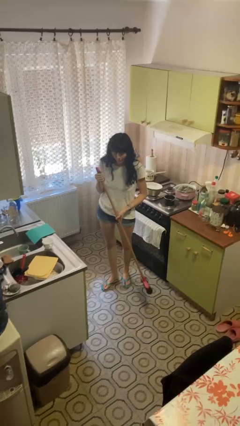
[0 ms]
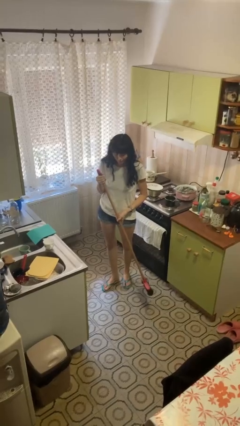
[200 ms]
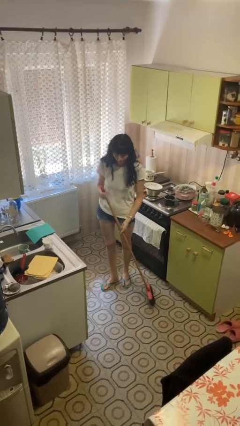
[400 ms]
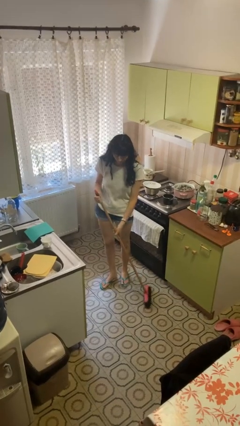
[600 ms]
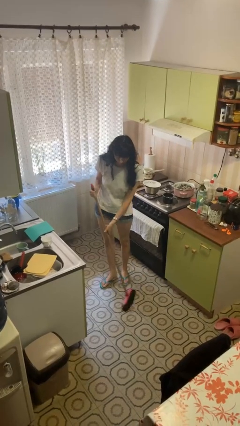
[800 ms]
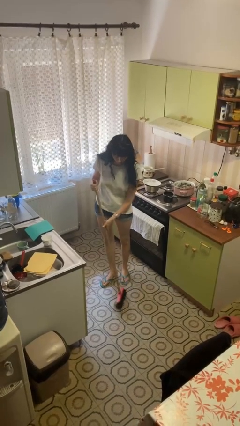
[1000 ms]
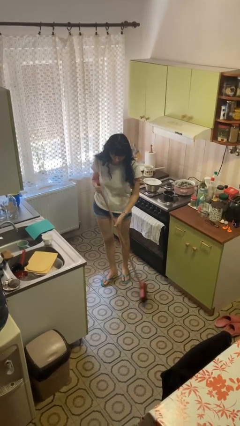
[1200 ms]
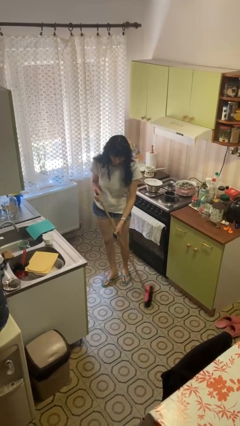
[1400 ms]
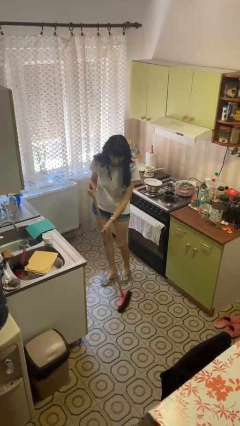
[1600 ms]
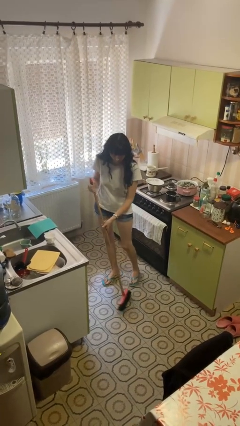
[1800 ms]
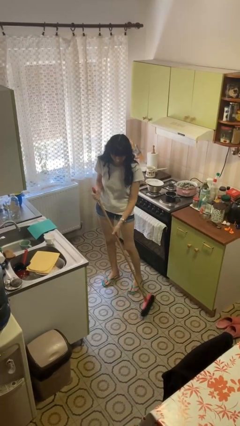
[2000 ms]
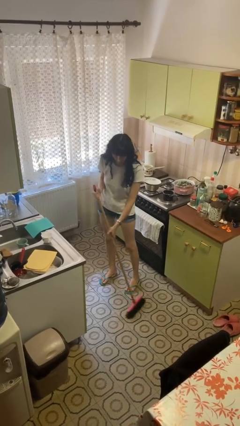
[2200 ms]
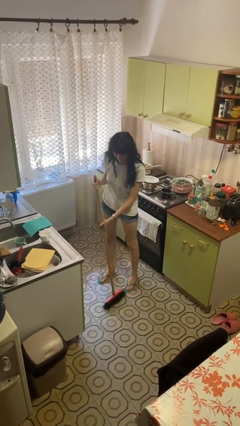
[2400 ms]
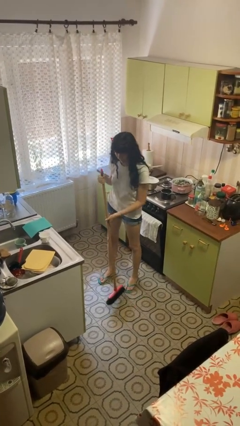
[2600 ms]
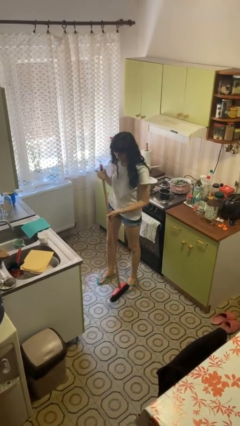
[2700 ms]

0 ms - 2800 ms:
person sweeps floor

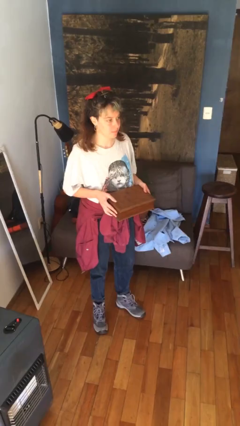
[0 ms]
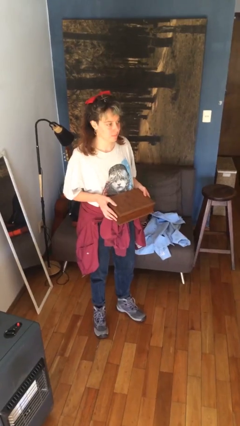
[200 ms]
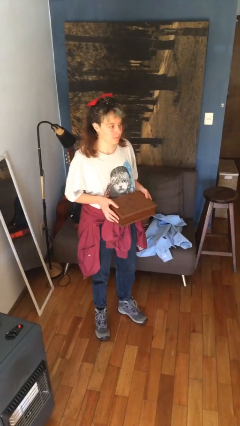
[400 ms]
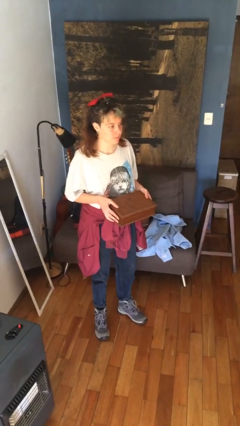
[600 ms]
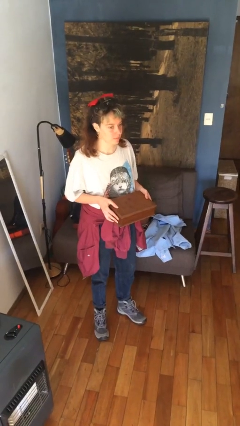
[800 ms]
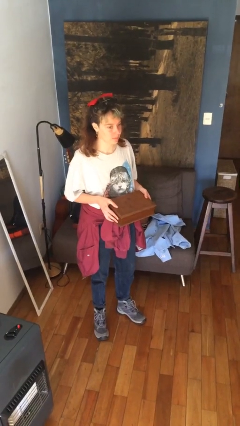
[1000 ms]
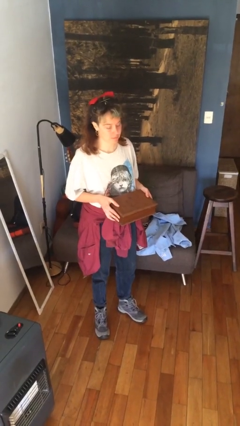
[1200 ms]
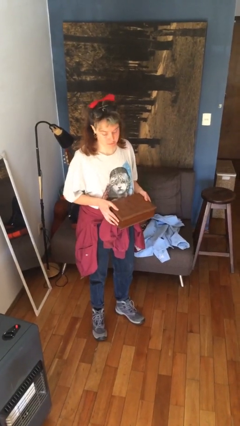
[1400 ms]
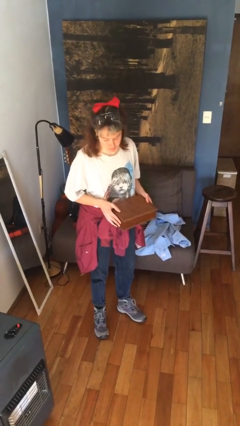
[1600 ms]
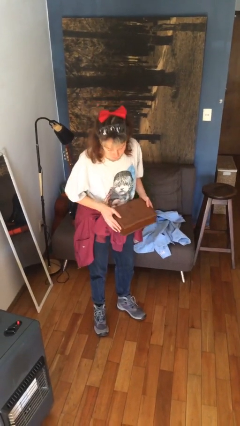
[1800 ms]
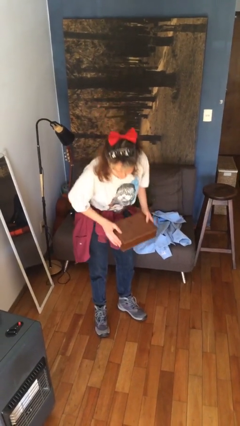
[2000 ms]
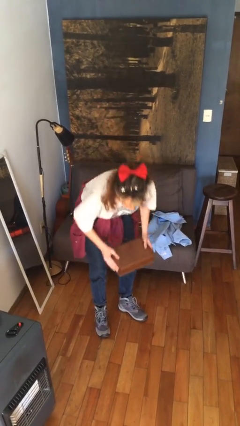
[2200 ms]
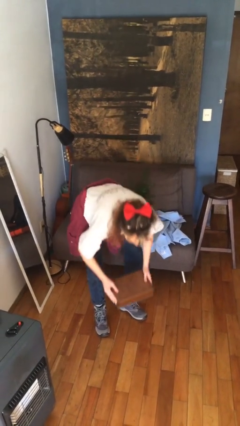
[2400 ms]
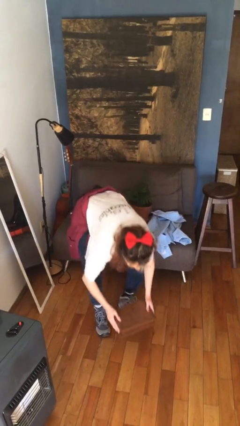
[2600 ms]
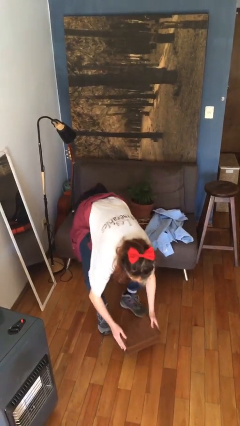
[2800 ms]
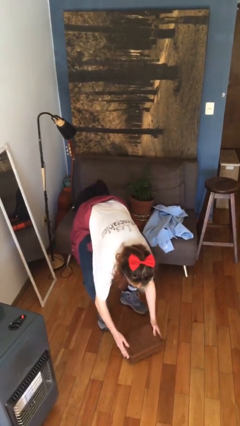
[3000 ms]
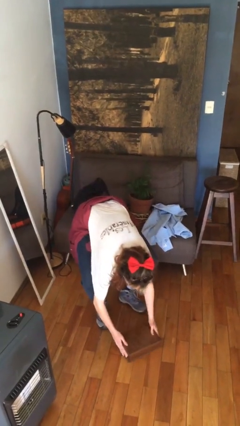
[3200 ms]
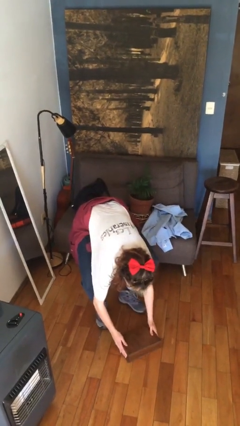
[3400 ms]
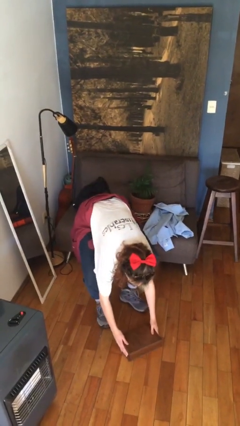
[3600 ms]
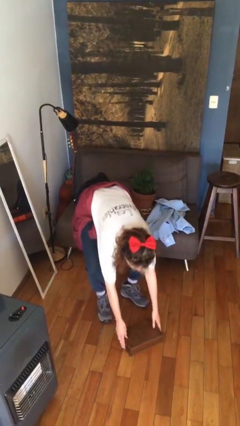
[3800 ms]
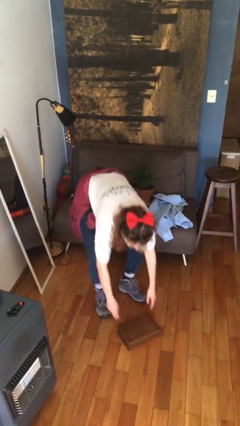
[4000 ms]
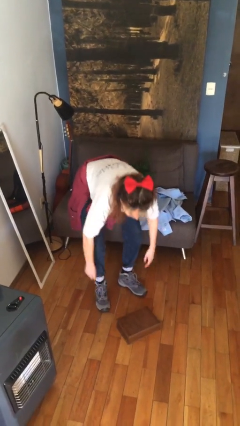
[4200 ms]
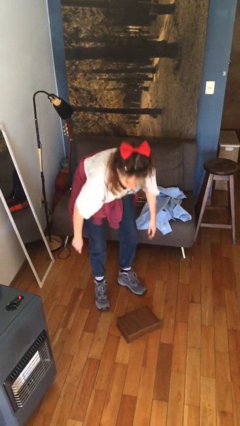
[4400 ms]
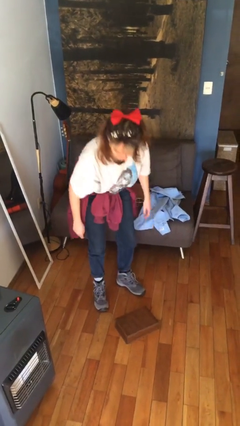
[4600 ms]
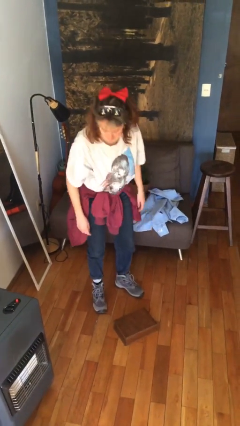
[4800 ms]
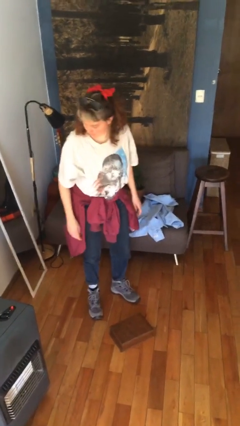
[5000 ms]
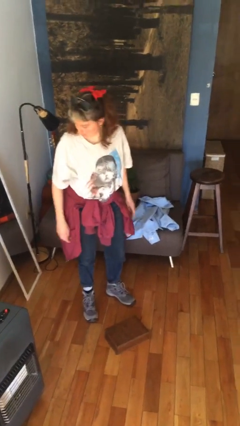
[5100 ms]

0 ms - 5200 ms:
person puts down object on floor

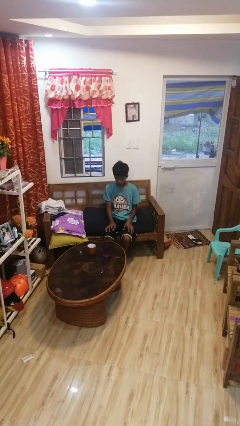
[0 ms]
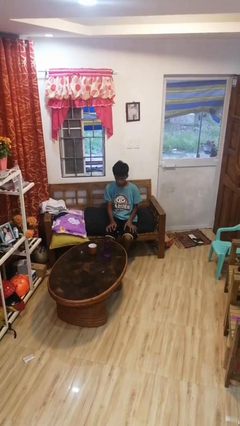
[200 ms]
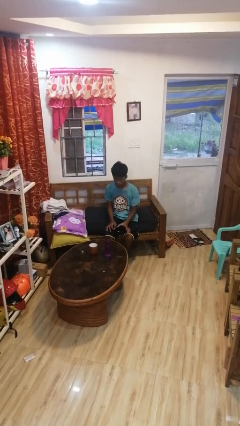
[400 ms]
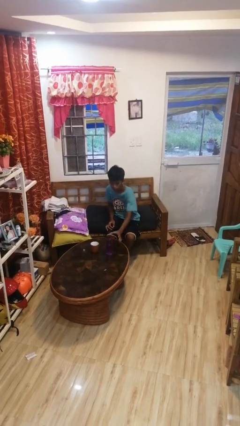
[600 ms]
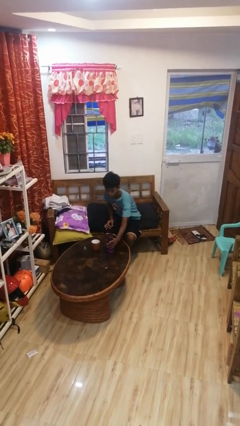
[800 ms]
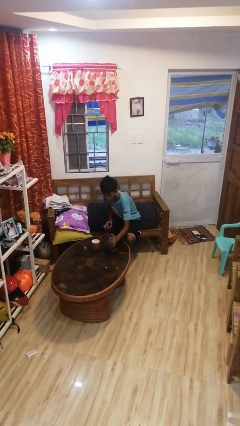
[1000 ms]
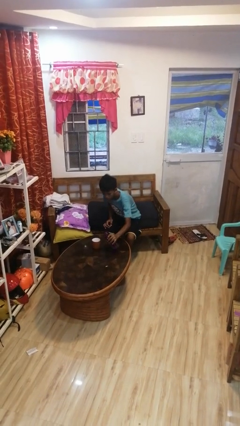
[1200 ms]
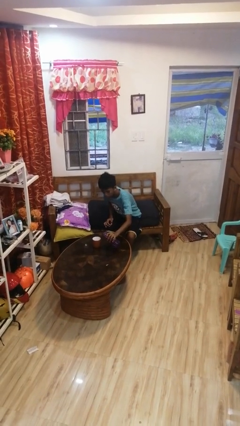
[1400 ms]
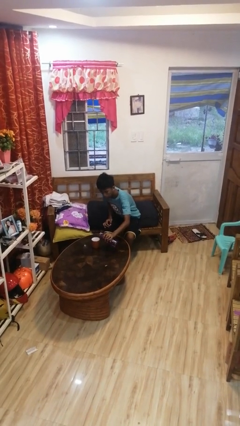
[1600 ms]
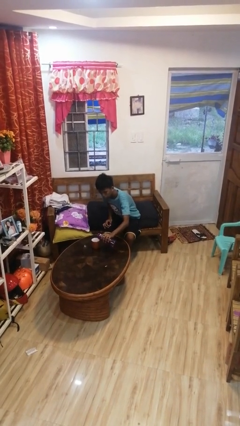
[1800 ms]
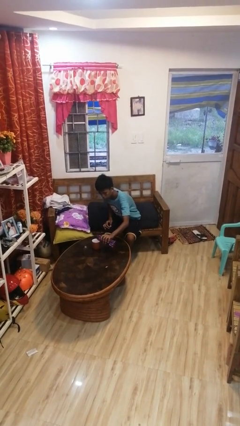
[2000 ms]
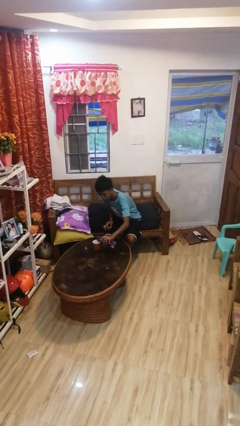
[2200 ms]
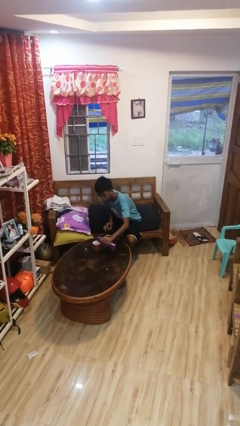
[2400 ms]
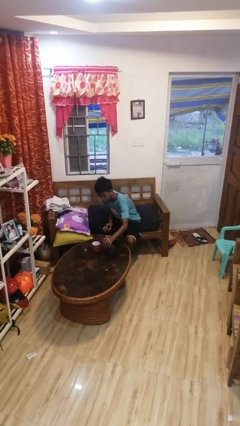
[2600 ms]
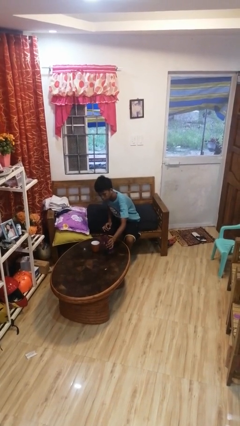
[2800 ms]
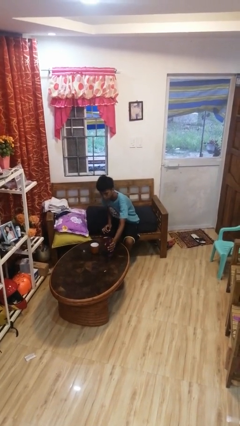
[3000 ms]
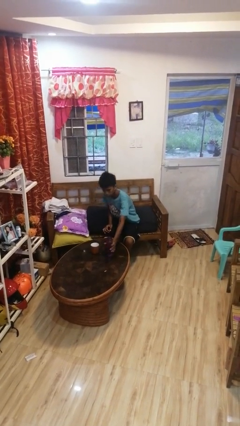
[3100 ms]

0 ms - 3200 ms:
person pours liquid into cup

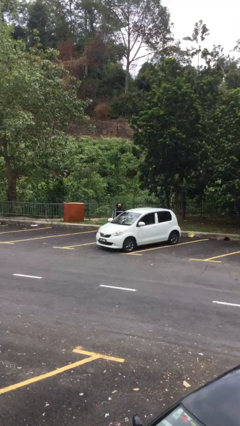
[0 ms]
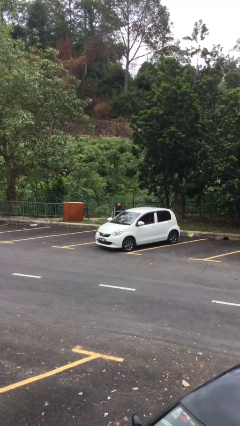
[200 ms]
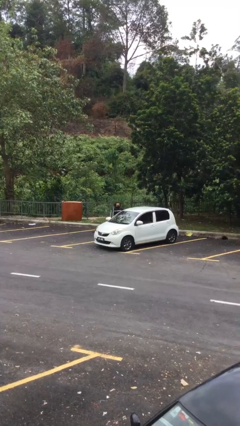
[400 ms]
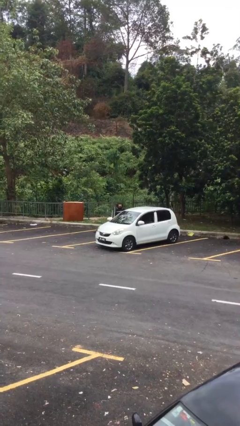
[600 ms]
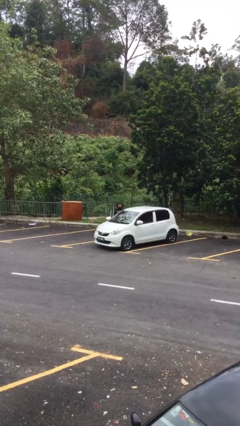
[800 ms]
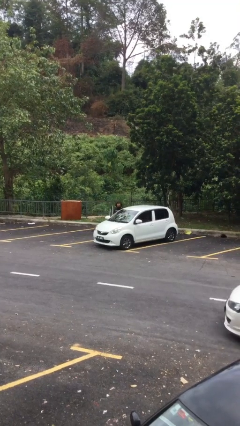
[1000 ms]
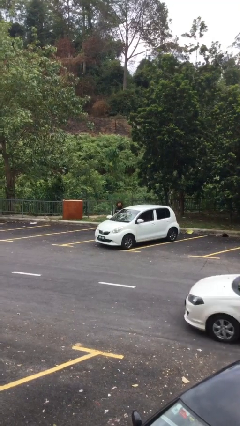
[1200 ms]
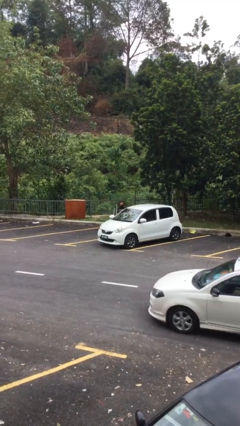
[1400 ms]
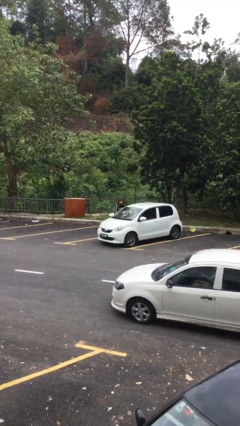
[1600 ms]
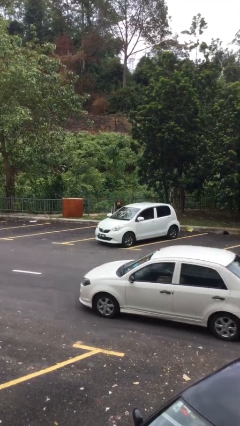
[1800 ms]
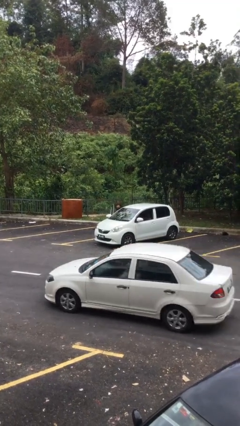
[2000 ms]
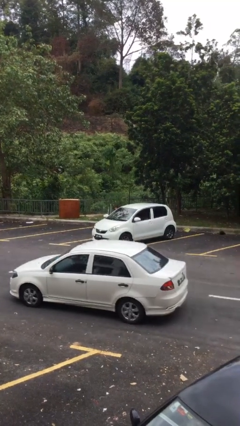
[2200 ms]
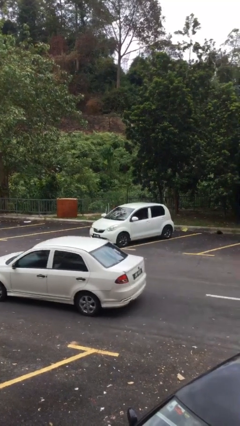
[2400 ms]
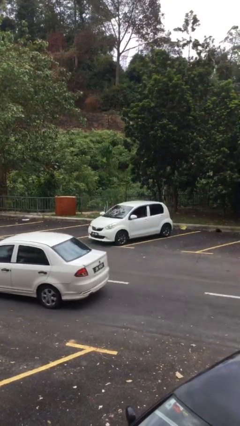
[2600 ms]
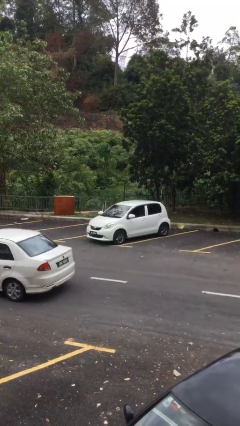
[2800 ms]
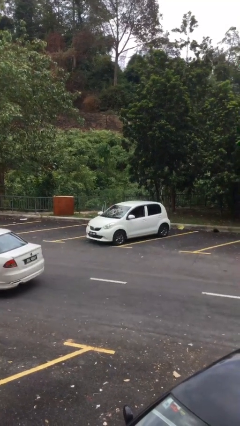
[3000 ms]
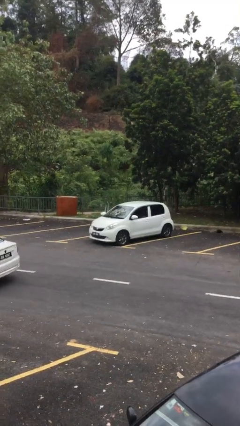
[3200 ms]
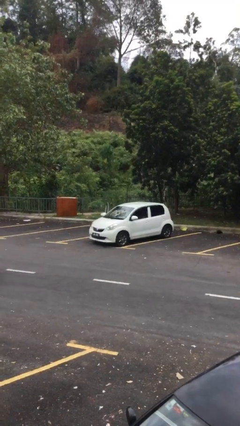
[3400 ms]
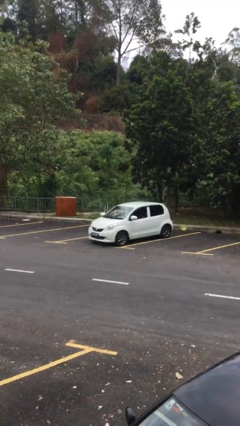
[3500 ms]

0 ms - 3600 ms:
person enters car

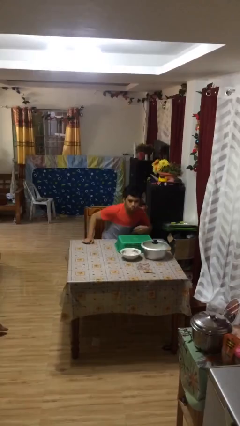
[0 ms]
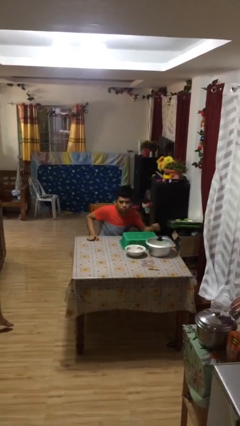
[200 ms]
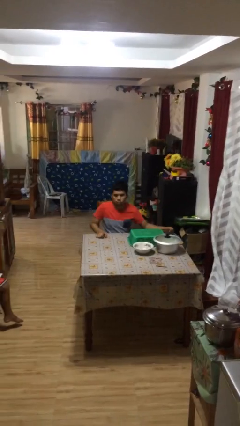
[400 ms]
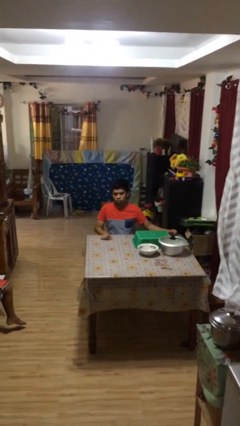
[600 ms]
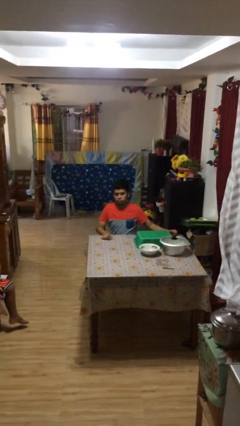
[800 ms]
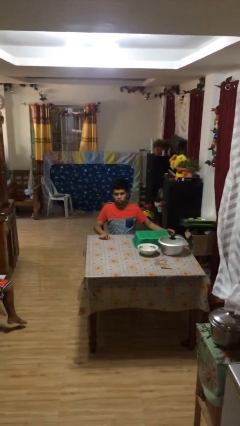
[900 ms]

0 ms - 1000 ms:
person sits down

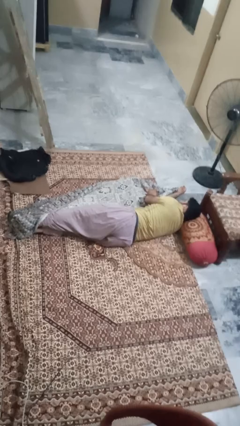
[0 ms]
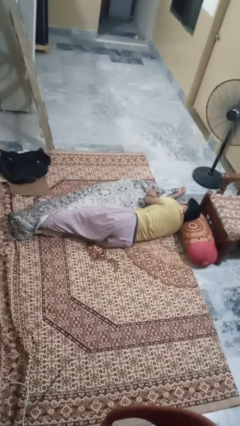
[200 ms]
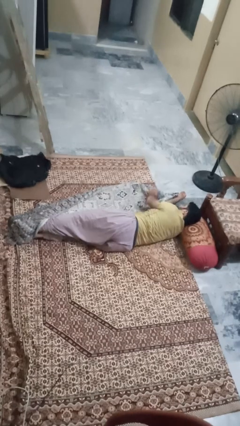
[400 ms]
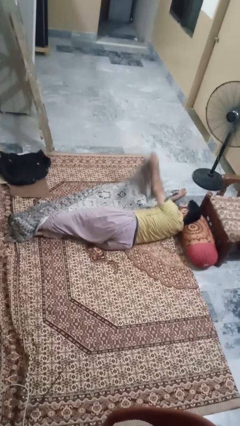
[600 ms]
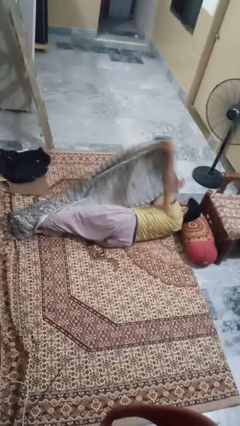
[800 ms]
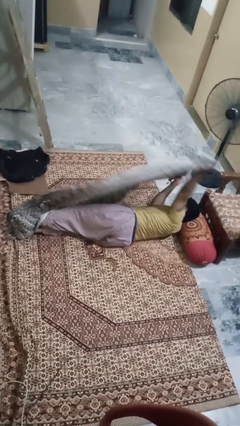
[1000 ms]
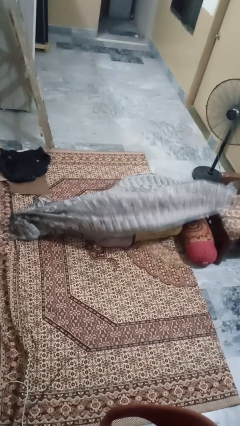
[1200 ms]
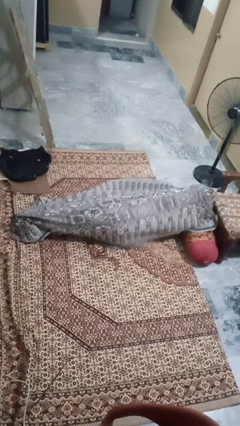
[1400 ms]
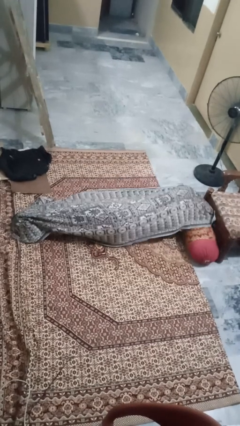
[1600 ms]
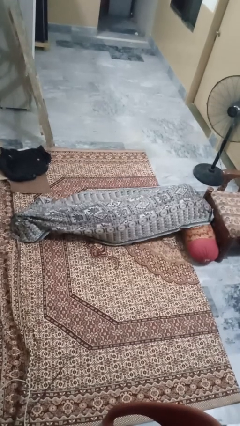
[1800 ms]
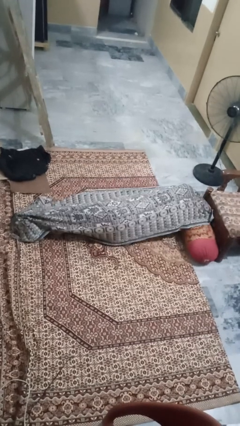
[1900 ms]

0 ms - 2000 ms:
person covers with blanket
